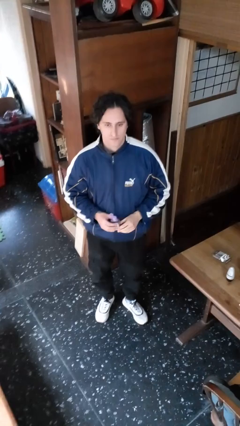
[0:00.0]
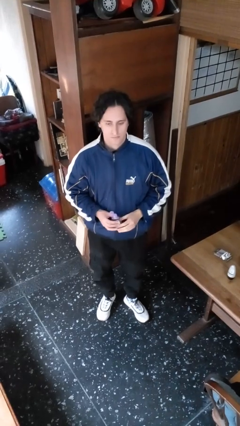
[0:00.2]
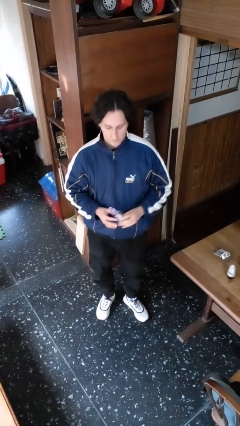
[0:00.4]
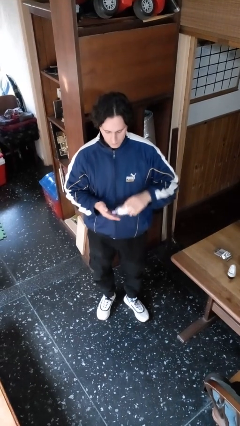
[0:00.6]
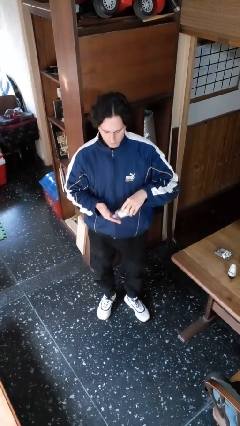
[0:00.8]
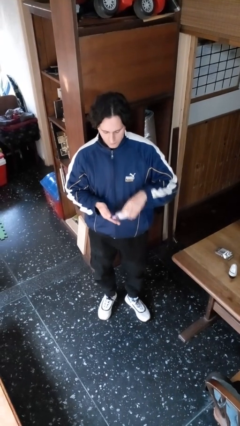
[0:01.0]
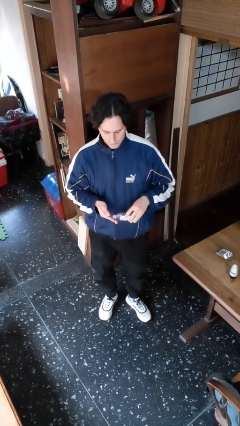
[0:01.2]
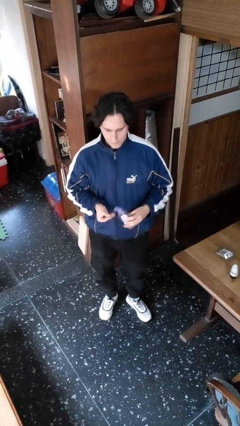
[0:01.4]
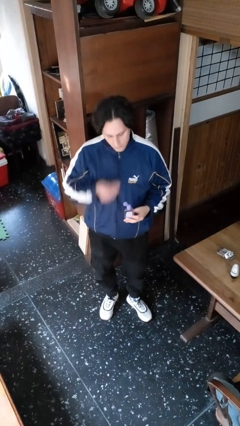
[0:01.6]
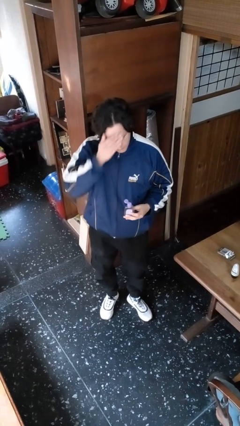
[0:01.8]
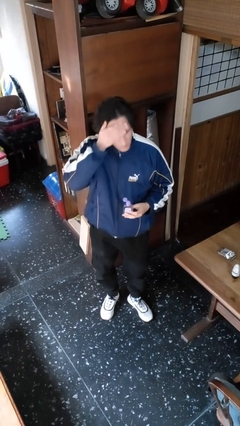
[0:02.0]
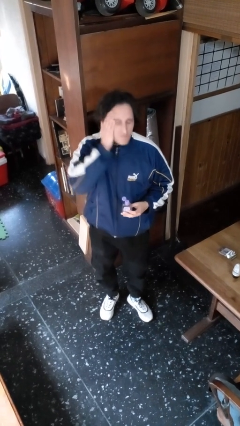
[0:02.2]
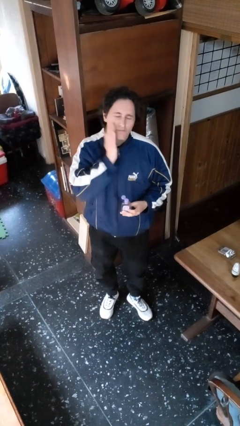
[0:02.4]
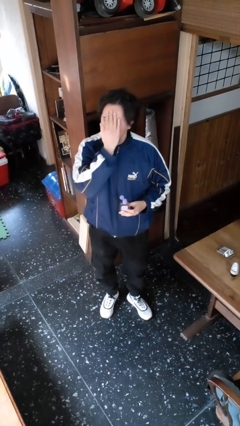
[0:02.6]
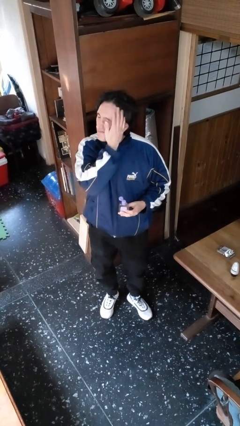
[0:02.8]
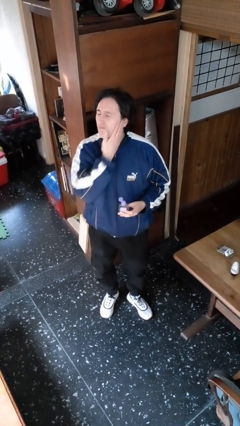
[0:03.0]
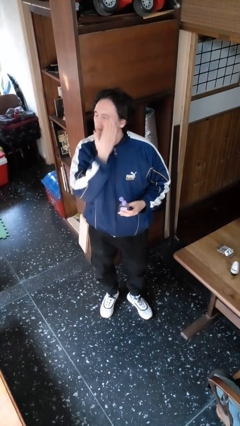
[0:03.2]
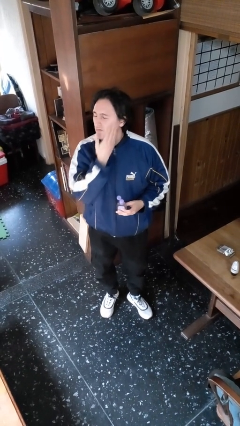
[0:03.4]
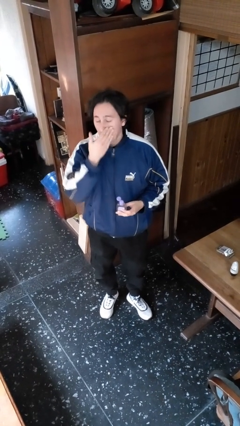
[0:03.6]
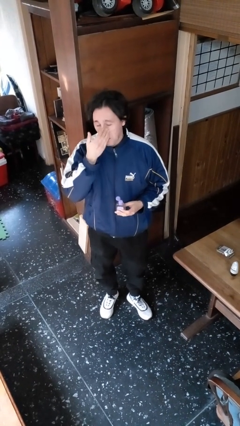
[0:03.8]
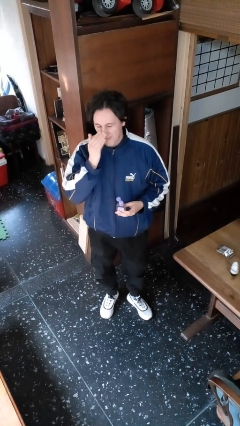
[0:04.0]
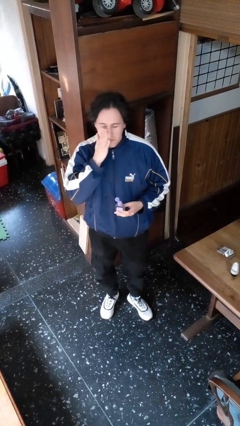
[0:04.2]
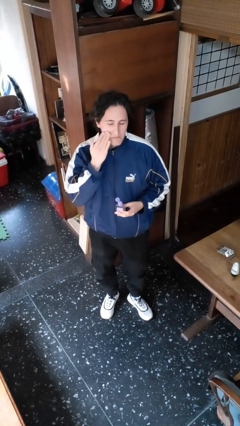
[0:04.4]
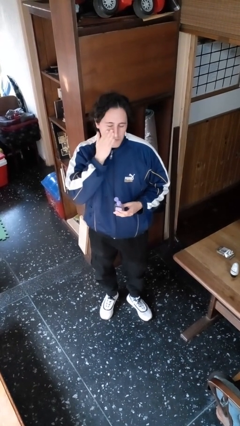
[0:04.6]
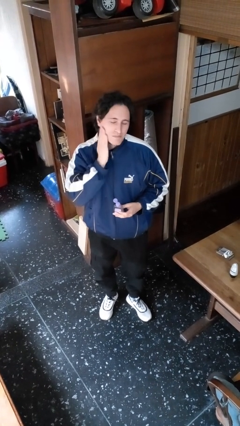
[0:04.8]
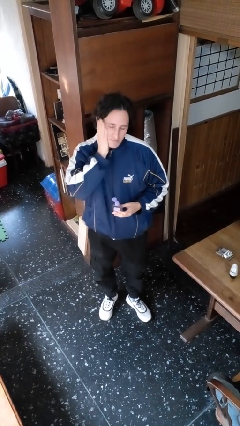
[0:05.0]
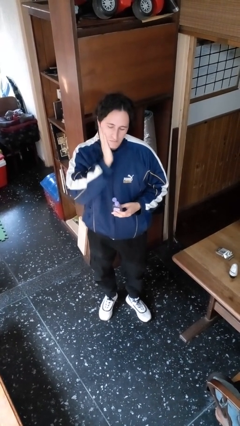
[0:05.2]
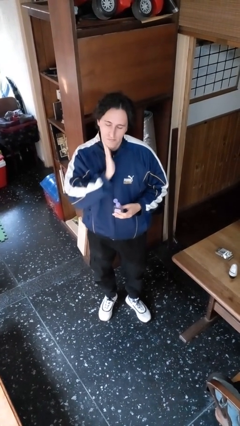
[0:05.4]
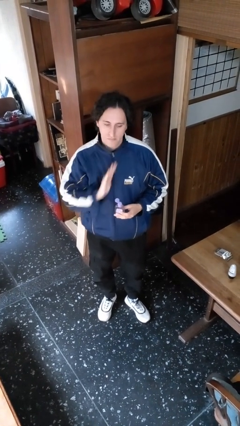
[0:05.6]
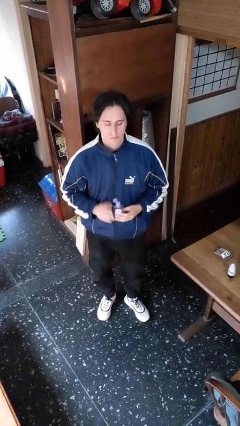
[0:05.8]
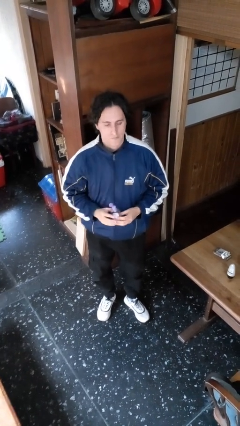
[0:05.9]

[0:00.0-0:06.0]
person applies facial moisturizer

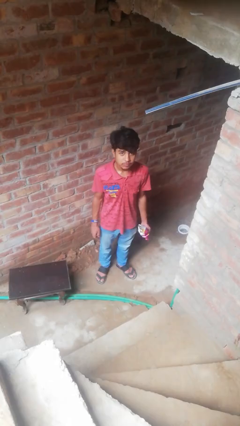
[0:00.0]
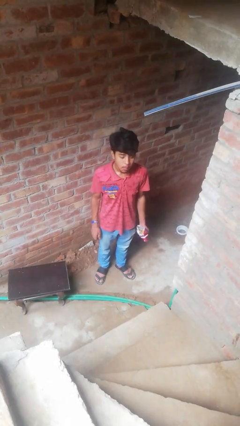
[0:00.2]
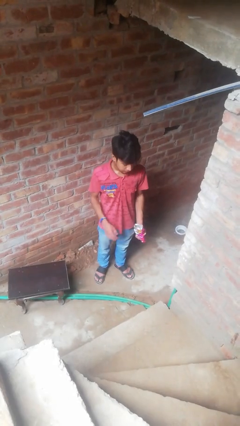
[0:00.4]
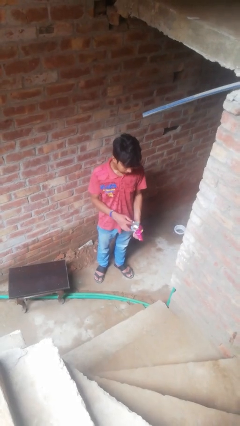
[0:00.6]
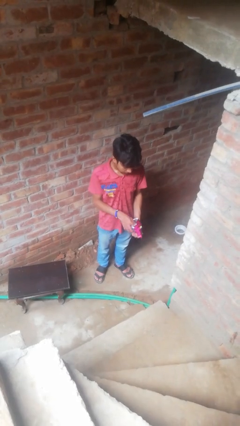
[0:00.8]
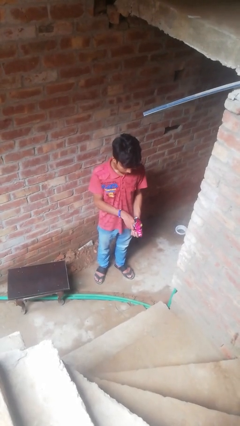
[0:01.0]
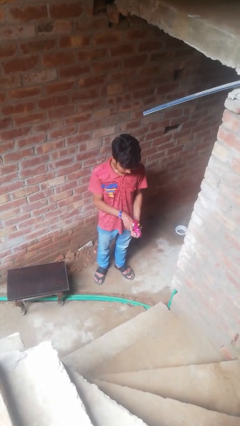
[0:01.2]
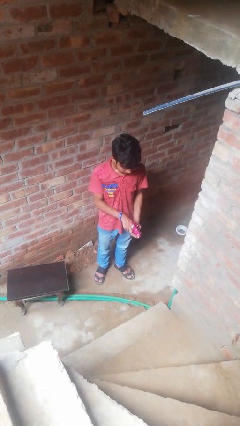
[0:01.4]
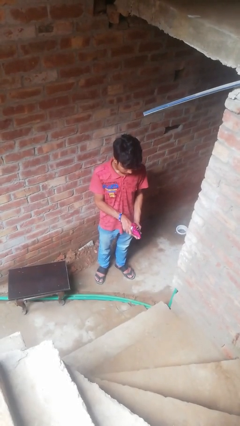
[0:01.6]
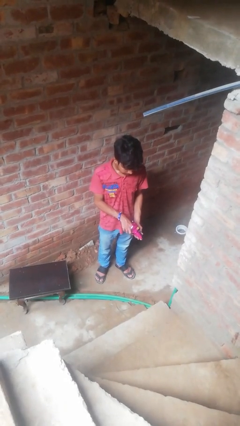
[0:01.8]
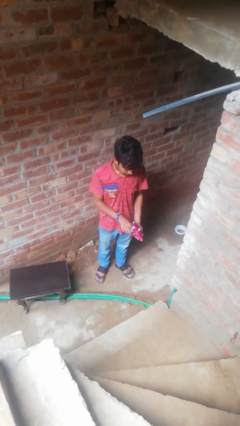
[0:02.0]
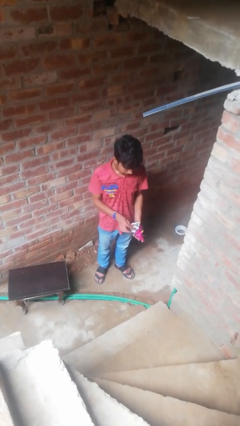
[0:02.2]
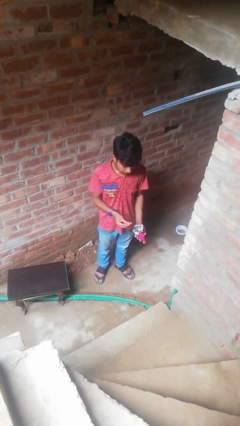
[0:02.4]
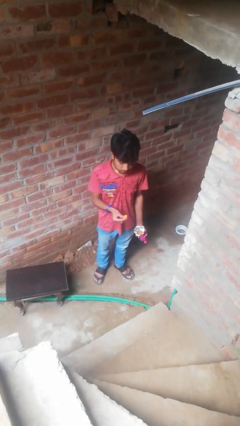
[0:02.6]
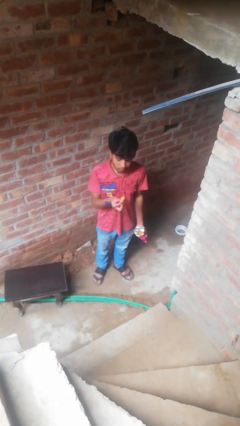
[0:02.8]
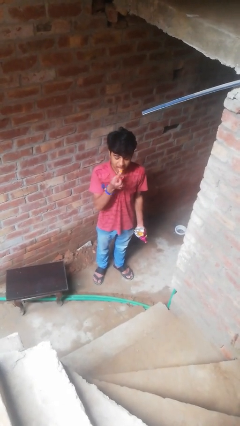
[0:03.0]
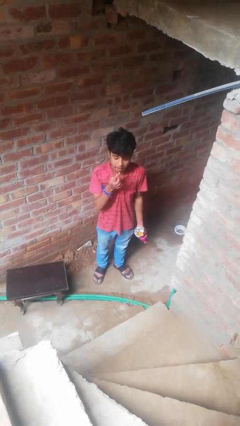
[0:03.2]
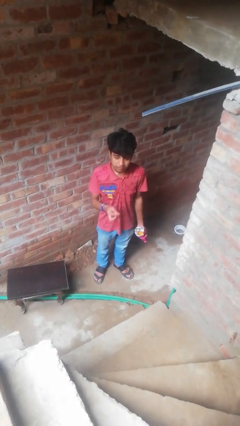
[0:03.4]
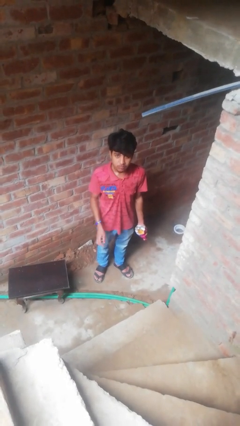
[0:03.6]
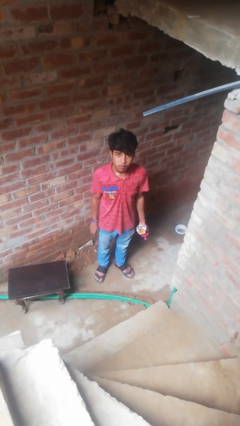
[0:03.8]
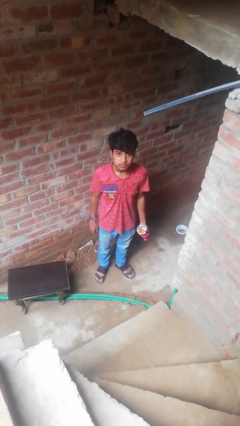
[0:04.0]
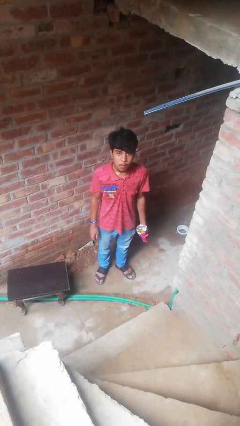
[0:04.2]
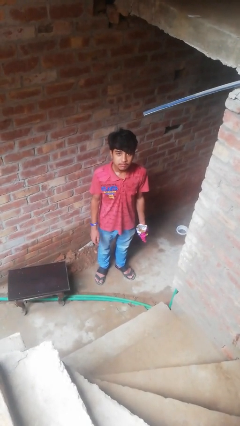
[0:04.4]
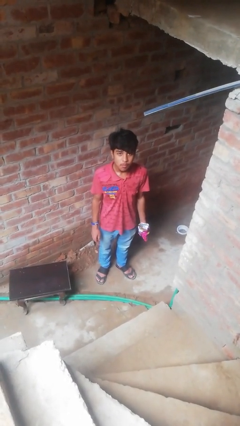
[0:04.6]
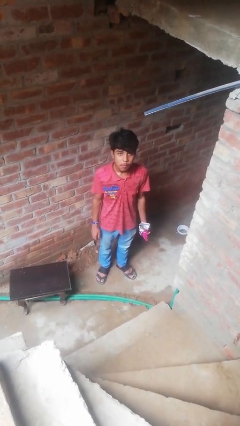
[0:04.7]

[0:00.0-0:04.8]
person eats snack from bag

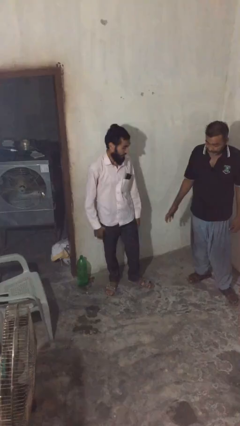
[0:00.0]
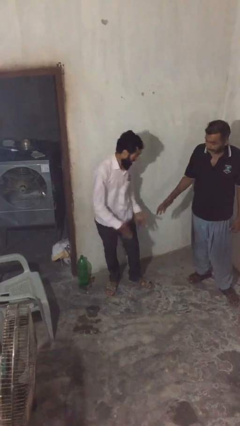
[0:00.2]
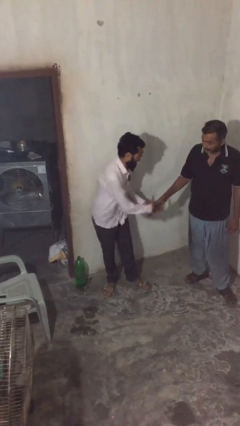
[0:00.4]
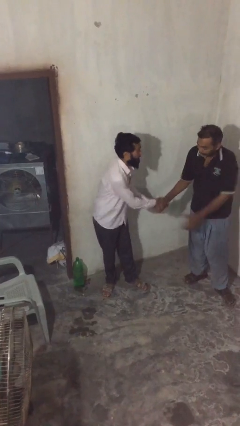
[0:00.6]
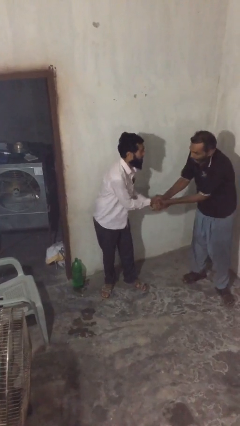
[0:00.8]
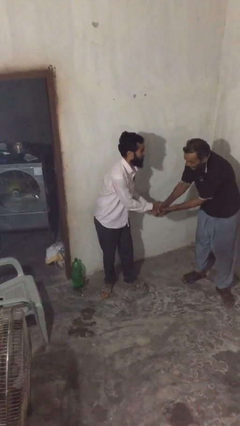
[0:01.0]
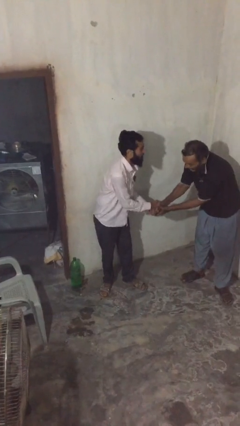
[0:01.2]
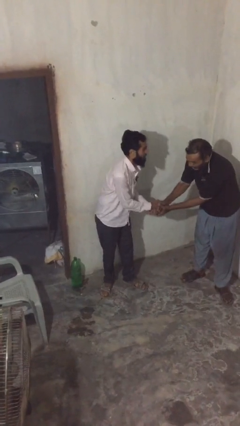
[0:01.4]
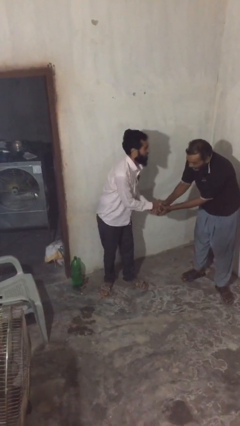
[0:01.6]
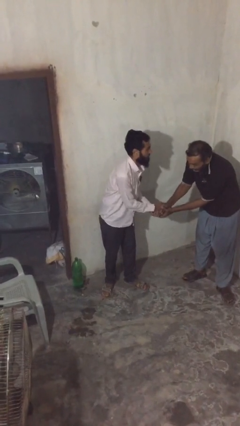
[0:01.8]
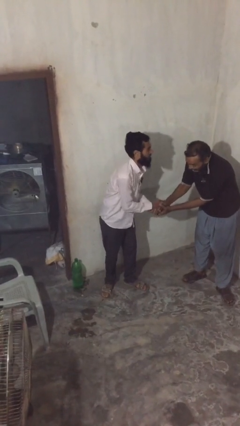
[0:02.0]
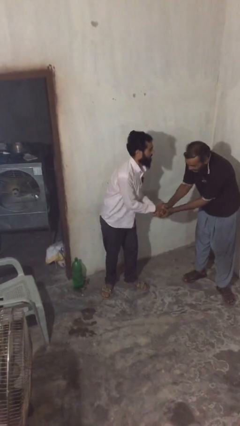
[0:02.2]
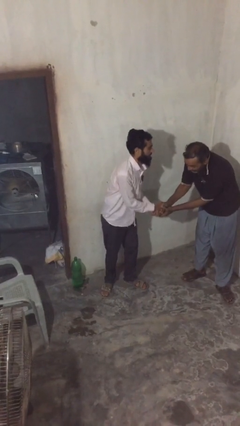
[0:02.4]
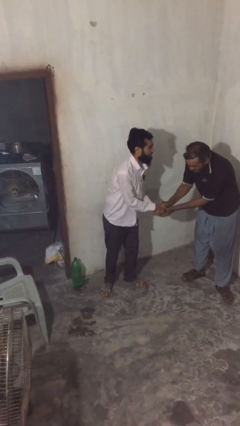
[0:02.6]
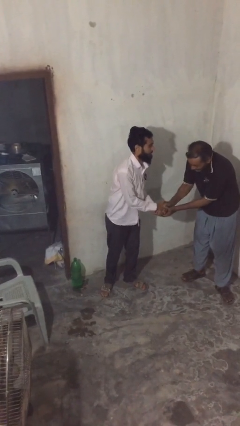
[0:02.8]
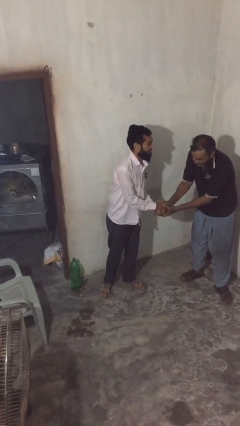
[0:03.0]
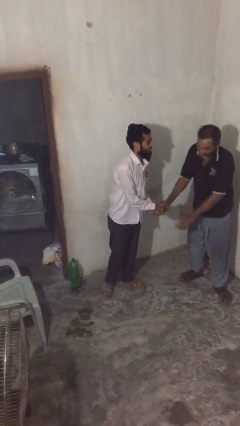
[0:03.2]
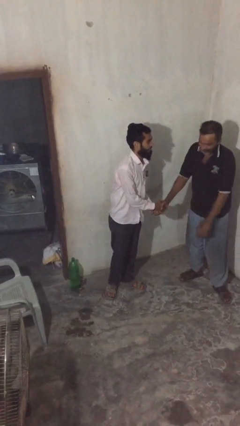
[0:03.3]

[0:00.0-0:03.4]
person shakes hand

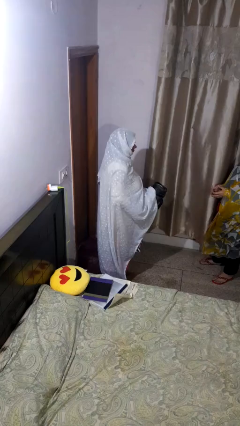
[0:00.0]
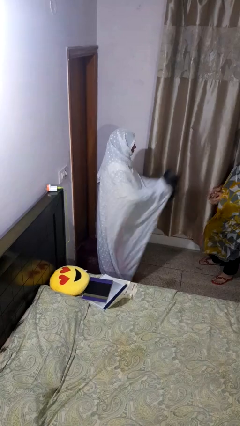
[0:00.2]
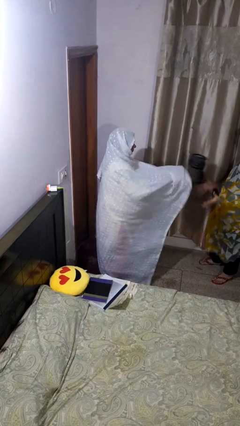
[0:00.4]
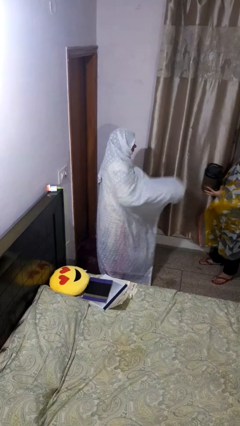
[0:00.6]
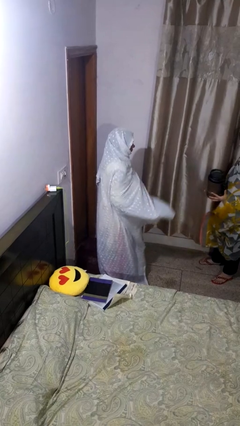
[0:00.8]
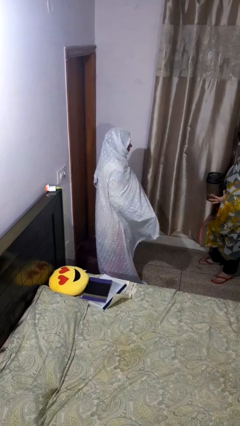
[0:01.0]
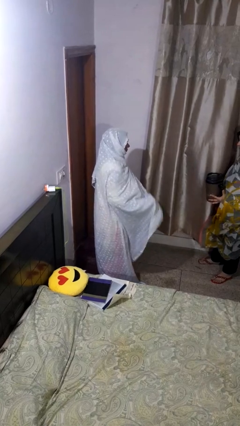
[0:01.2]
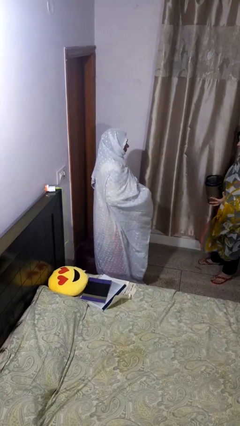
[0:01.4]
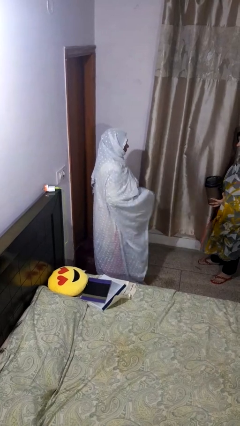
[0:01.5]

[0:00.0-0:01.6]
person throws object to person

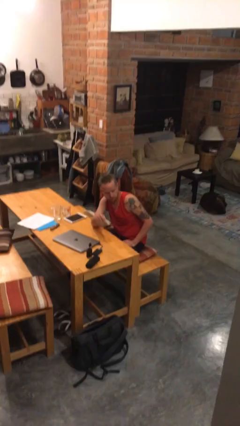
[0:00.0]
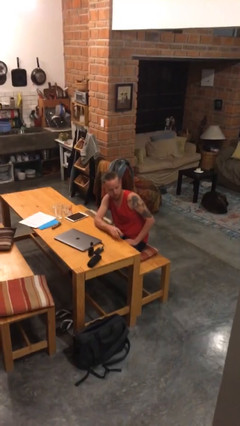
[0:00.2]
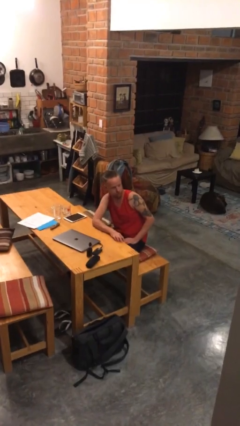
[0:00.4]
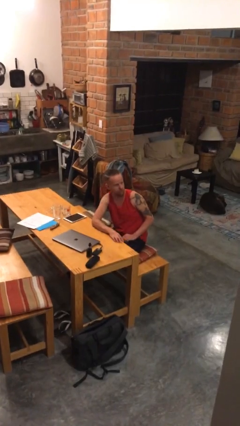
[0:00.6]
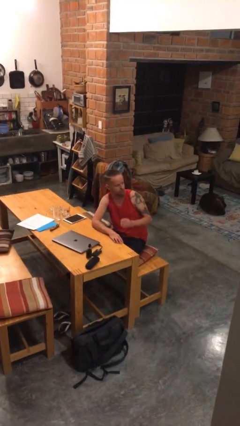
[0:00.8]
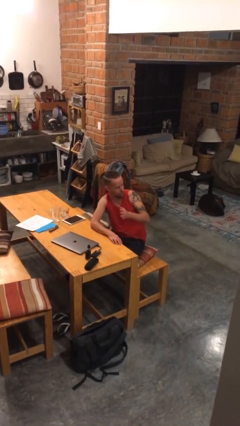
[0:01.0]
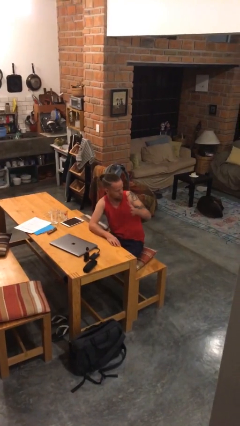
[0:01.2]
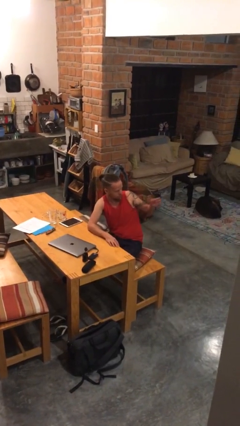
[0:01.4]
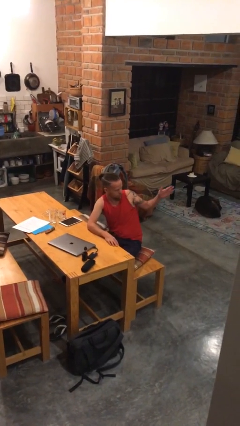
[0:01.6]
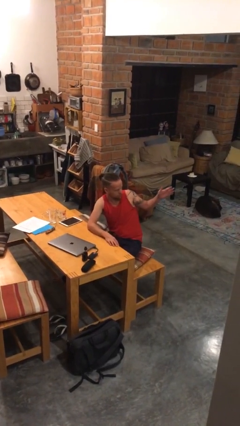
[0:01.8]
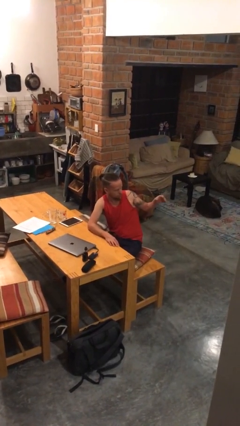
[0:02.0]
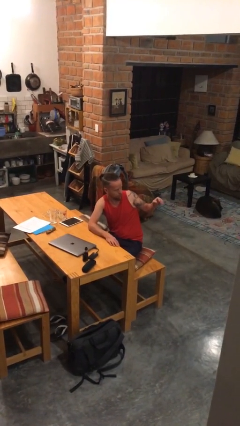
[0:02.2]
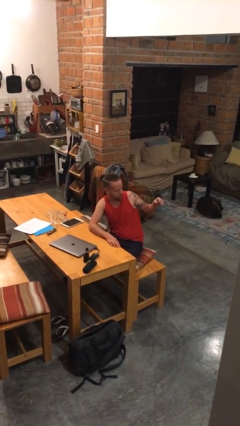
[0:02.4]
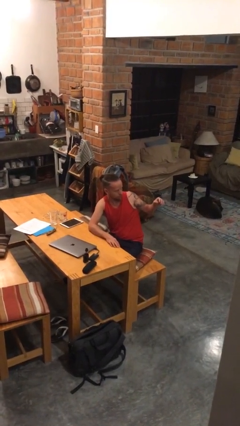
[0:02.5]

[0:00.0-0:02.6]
person gestures swipe left
